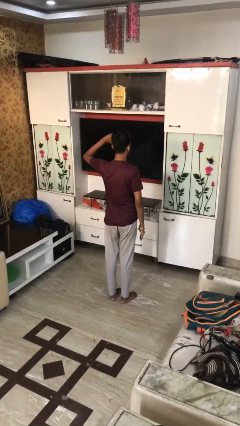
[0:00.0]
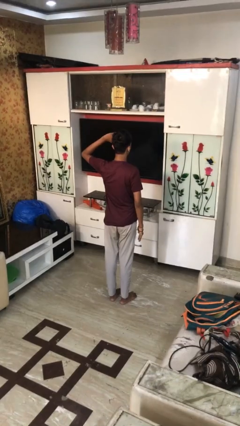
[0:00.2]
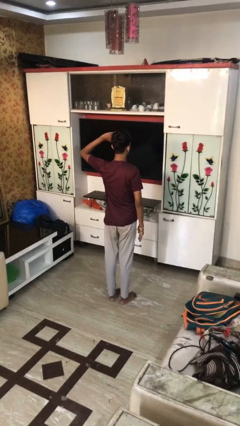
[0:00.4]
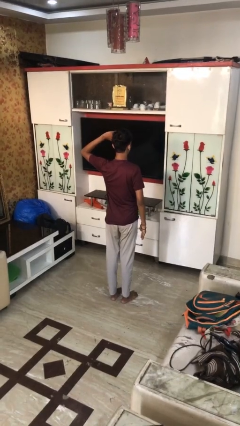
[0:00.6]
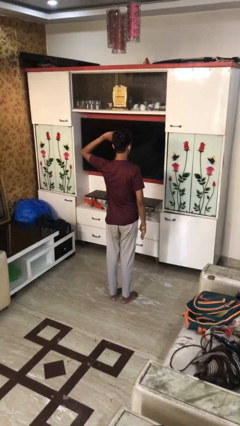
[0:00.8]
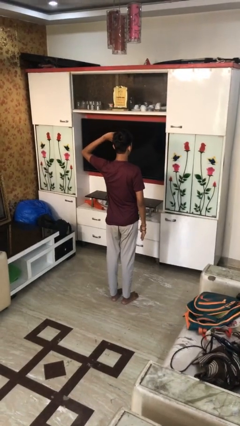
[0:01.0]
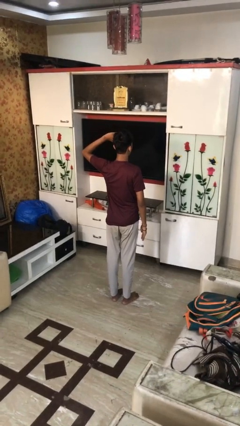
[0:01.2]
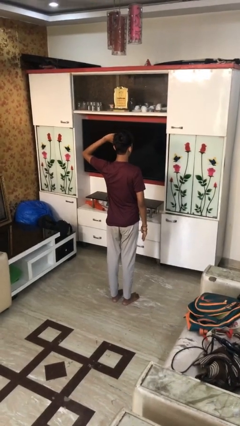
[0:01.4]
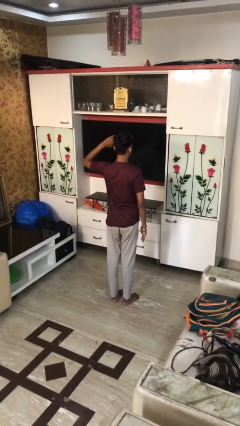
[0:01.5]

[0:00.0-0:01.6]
person salutes

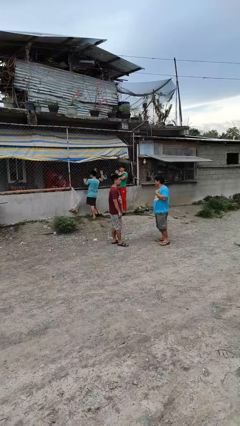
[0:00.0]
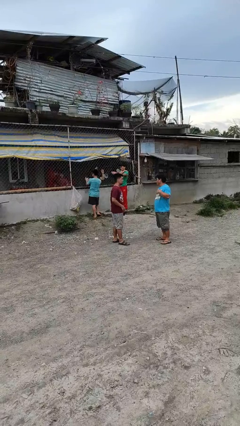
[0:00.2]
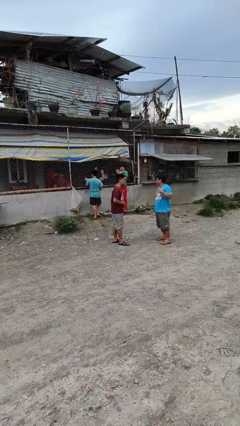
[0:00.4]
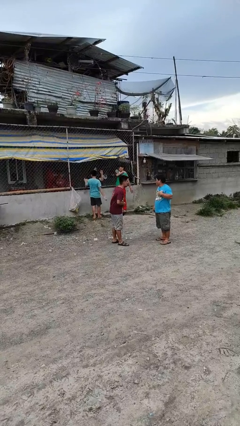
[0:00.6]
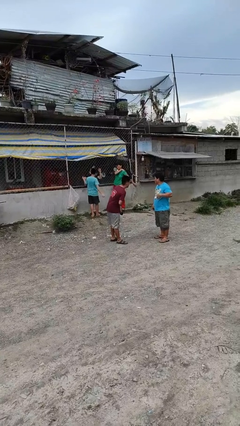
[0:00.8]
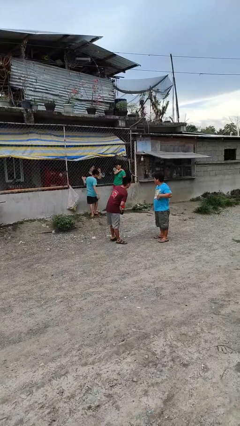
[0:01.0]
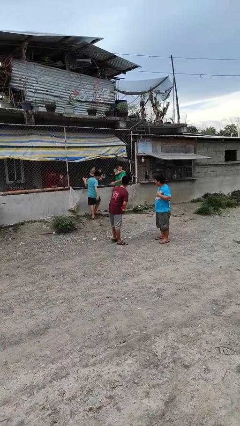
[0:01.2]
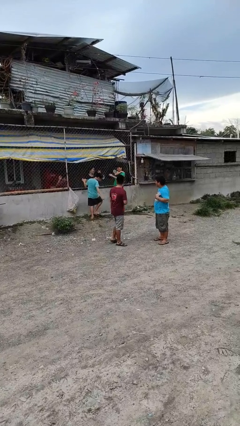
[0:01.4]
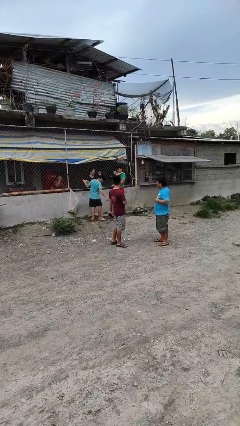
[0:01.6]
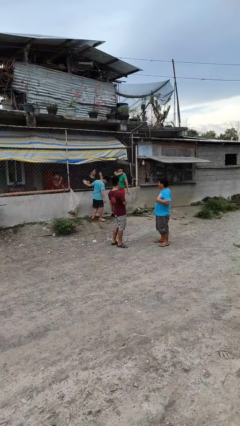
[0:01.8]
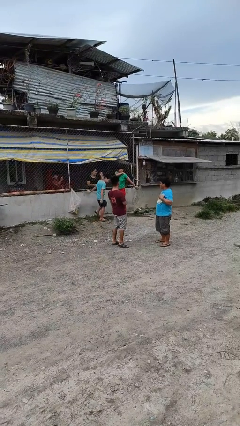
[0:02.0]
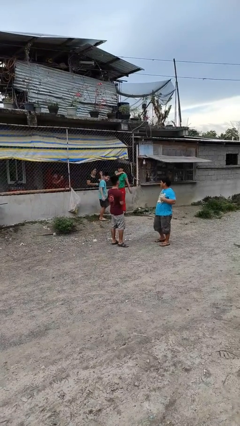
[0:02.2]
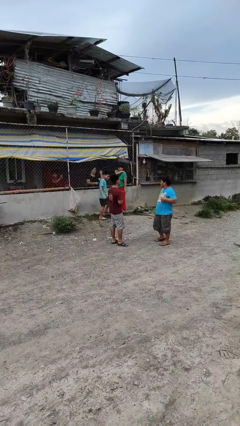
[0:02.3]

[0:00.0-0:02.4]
person laughs with person

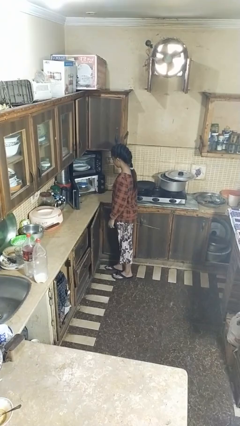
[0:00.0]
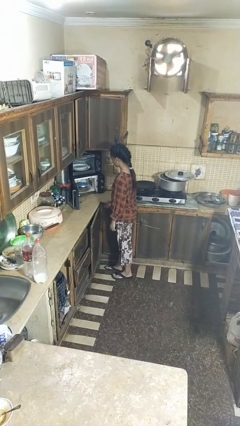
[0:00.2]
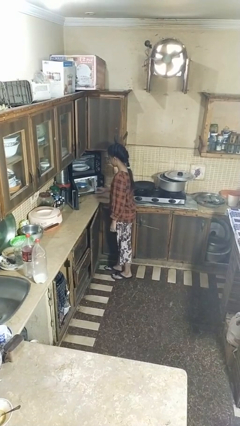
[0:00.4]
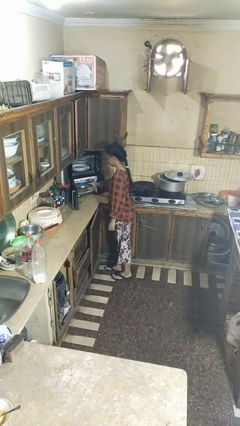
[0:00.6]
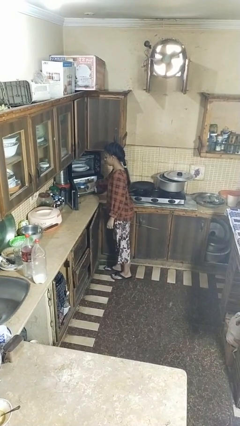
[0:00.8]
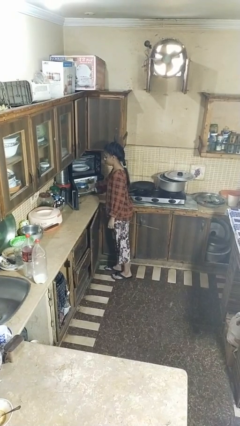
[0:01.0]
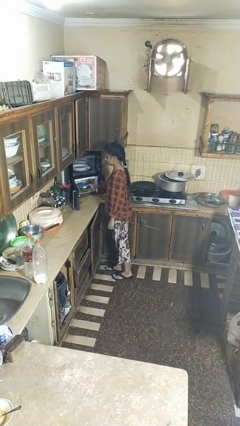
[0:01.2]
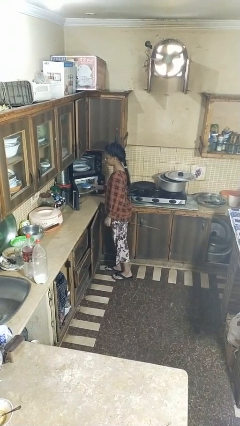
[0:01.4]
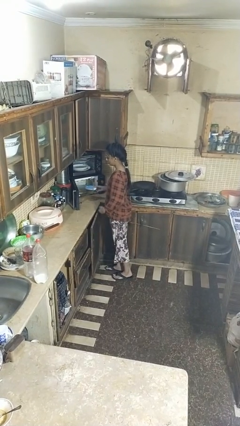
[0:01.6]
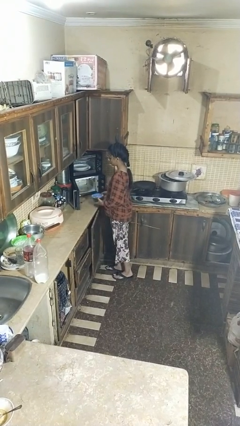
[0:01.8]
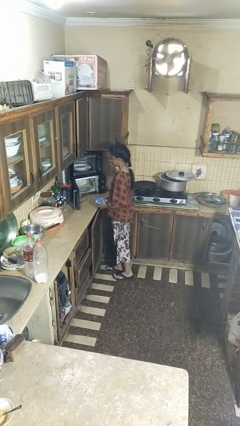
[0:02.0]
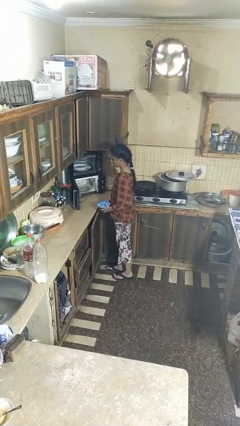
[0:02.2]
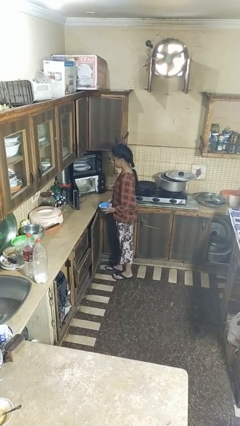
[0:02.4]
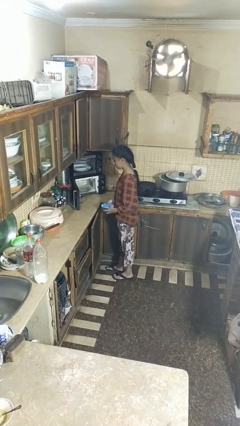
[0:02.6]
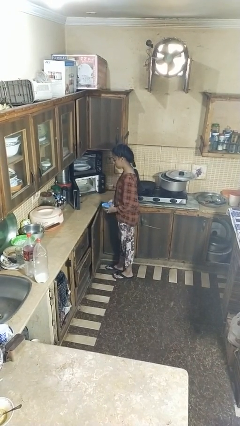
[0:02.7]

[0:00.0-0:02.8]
person takes object from microwave

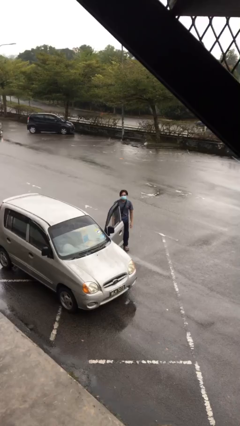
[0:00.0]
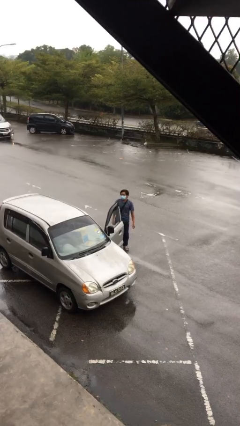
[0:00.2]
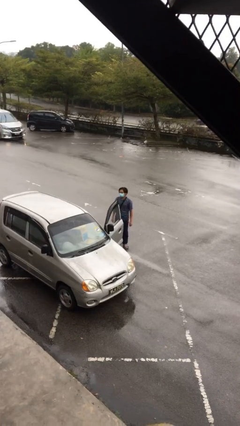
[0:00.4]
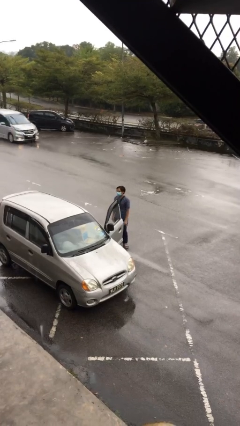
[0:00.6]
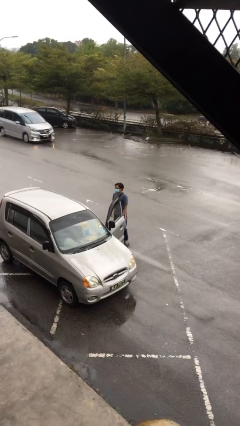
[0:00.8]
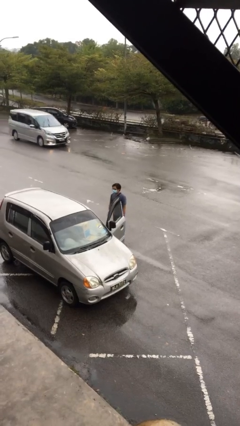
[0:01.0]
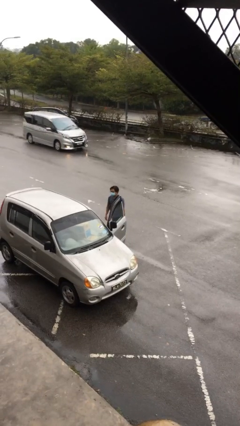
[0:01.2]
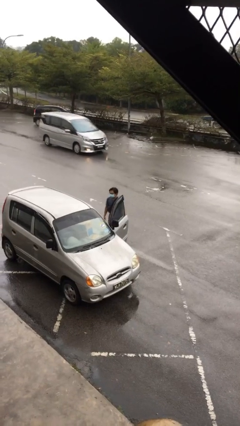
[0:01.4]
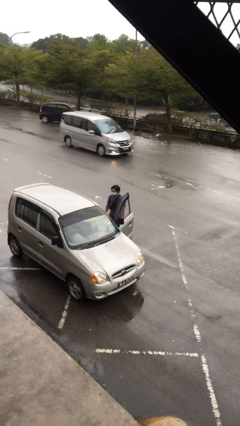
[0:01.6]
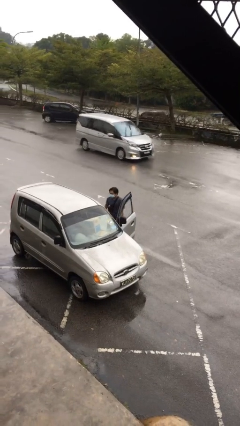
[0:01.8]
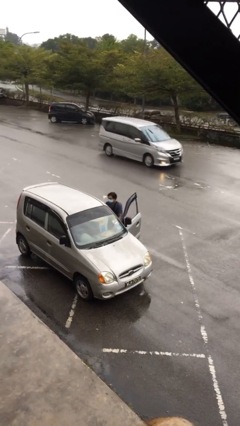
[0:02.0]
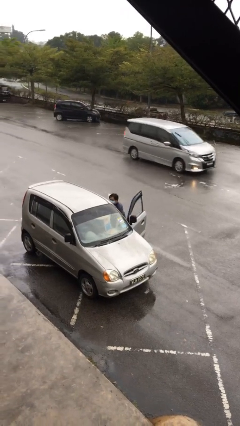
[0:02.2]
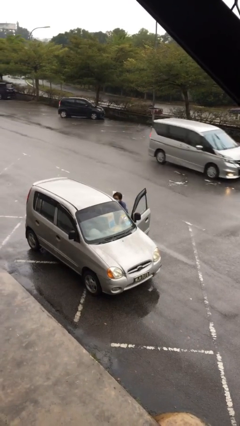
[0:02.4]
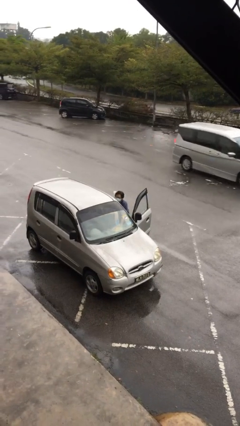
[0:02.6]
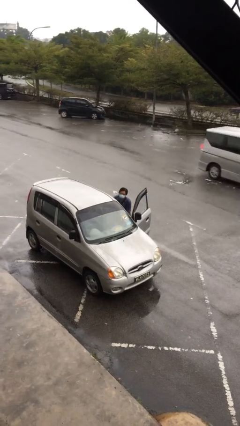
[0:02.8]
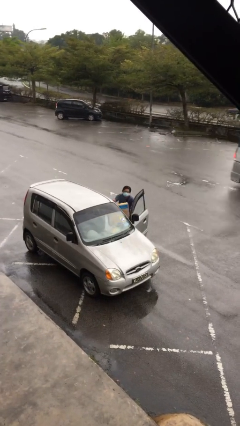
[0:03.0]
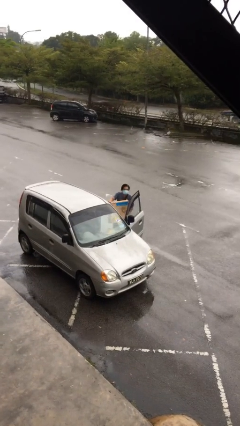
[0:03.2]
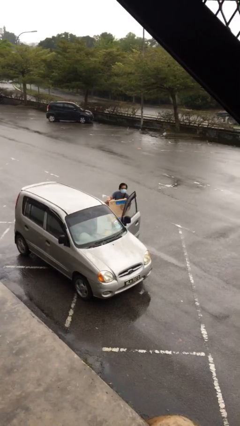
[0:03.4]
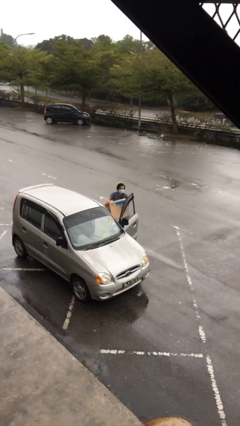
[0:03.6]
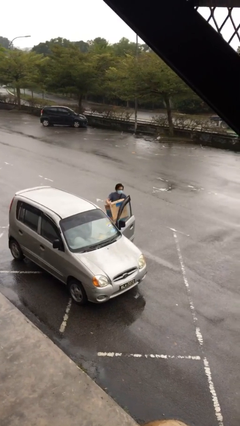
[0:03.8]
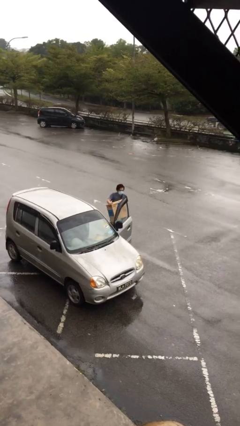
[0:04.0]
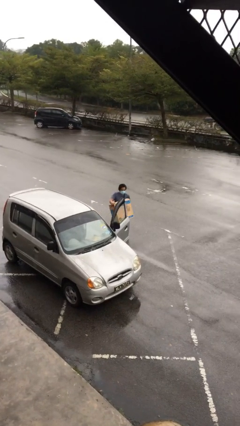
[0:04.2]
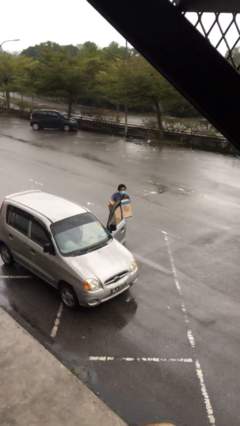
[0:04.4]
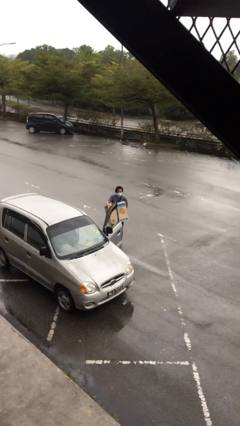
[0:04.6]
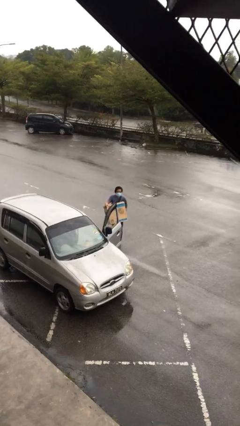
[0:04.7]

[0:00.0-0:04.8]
person unloads car

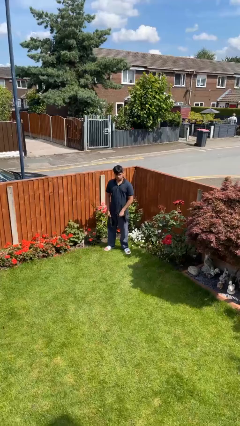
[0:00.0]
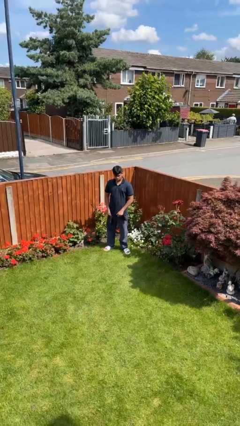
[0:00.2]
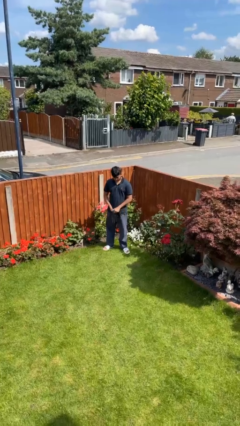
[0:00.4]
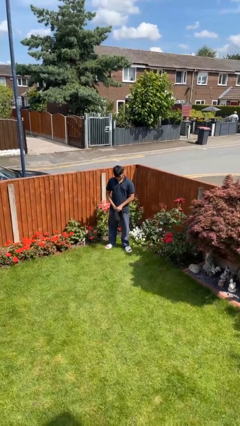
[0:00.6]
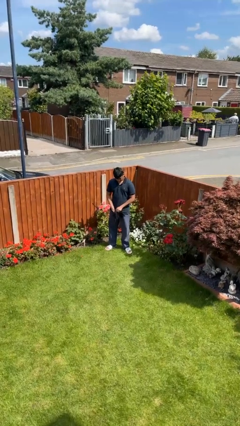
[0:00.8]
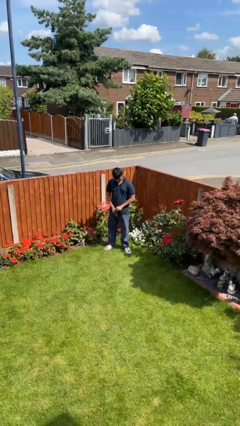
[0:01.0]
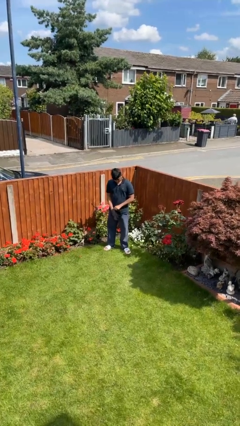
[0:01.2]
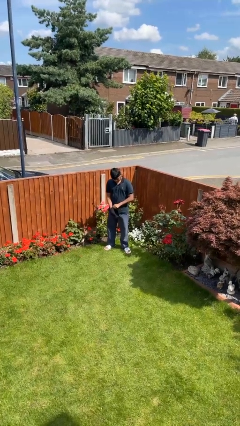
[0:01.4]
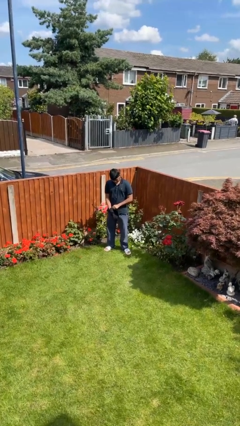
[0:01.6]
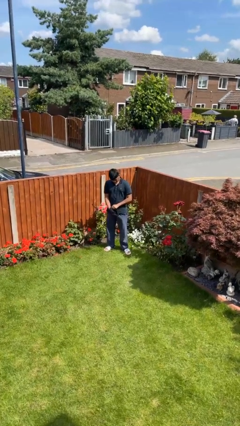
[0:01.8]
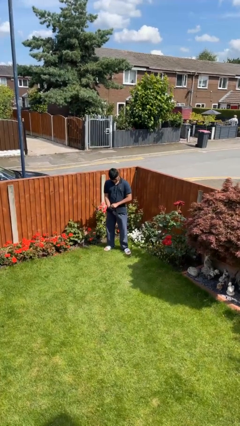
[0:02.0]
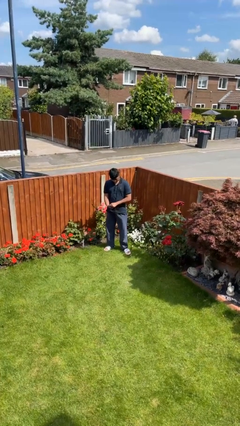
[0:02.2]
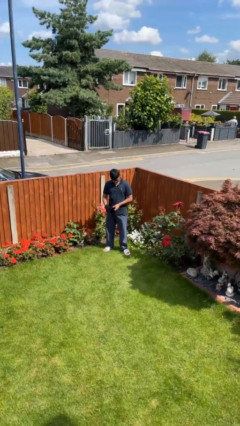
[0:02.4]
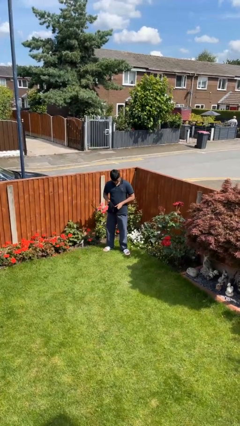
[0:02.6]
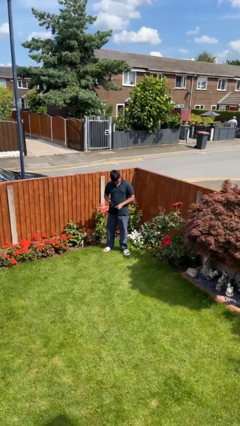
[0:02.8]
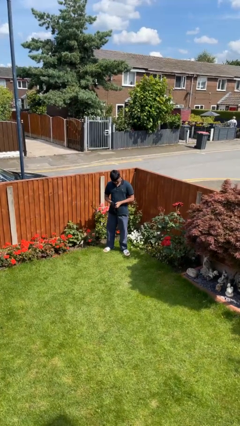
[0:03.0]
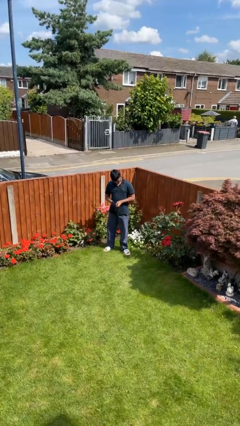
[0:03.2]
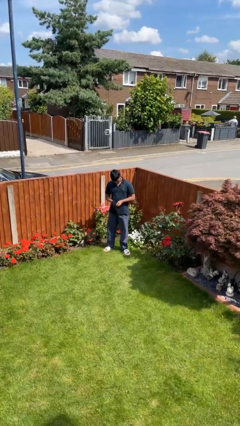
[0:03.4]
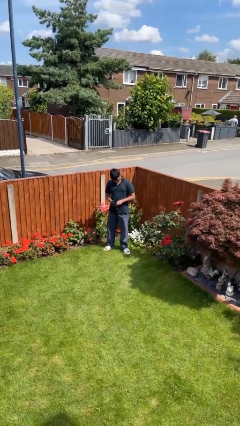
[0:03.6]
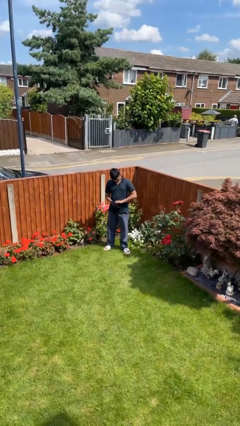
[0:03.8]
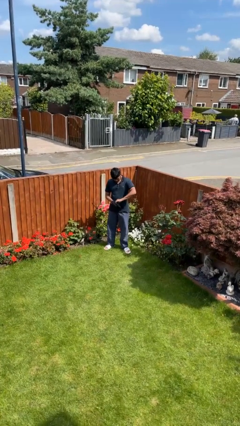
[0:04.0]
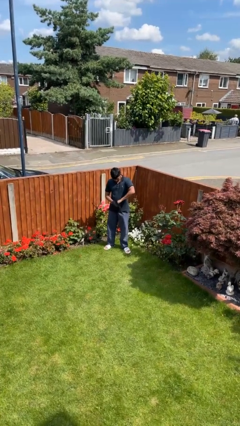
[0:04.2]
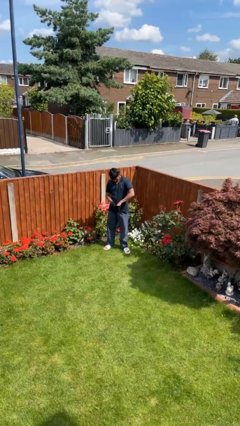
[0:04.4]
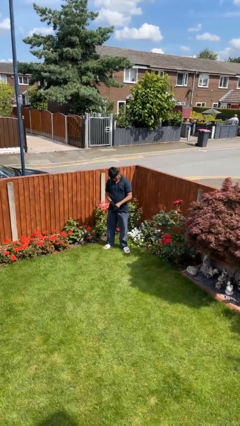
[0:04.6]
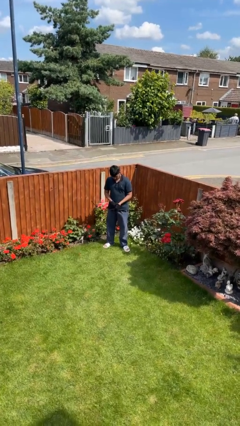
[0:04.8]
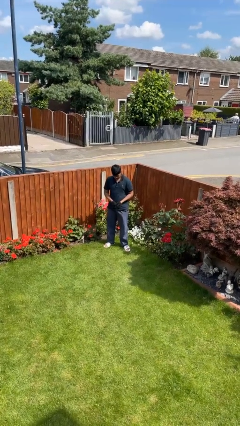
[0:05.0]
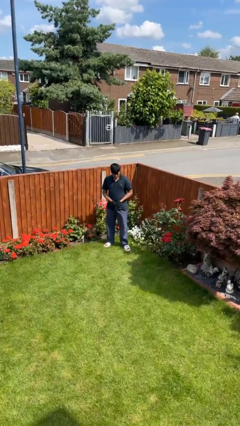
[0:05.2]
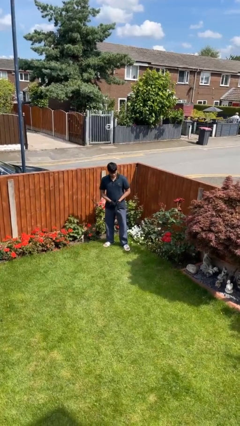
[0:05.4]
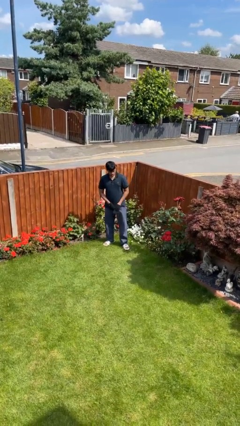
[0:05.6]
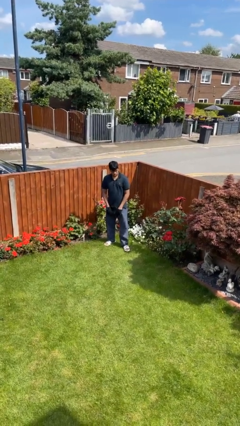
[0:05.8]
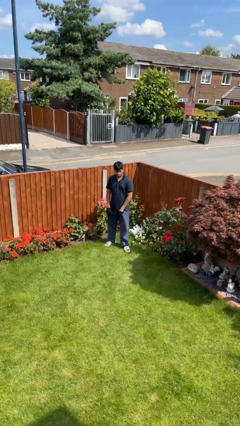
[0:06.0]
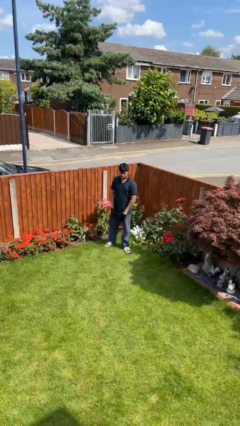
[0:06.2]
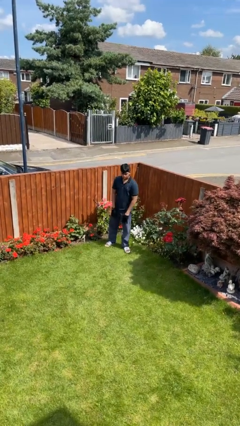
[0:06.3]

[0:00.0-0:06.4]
person puts on gloves
